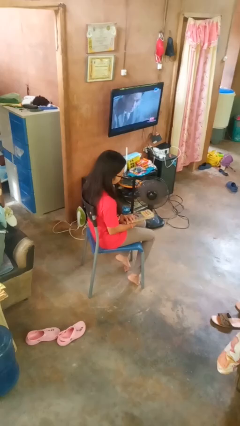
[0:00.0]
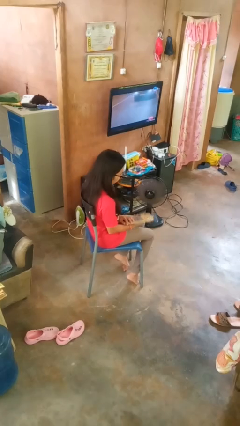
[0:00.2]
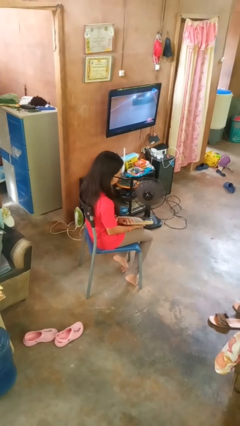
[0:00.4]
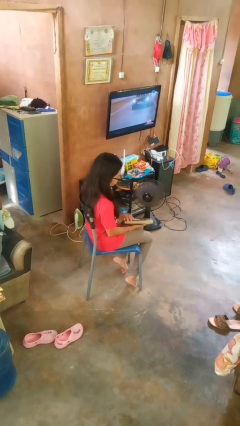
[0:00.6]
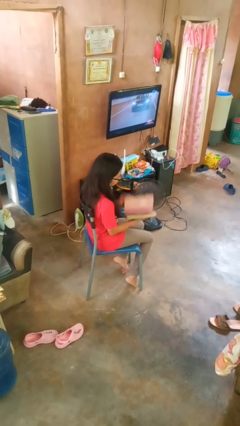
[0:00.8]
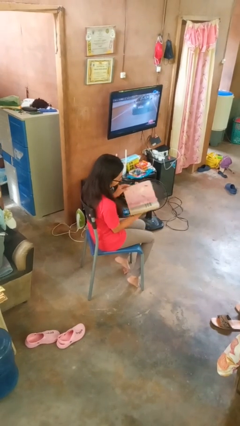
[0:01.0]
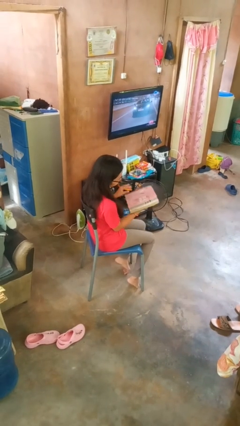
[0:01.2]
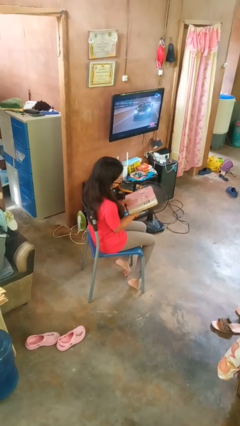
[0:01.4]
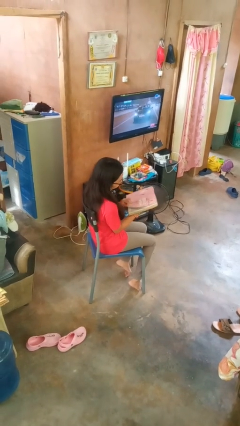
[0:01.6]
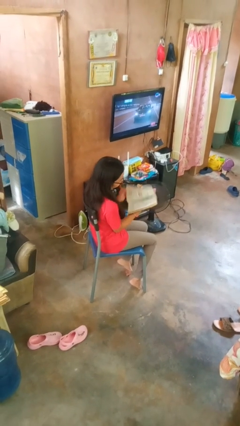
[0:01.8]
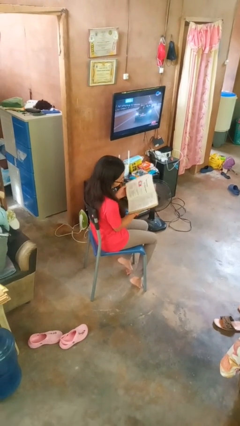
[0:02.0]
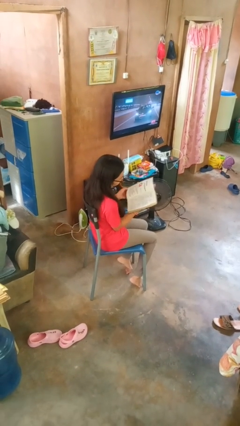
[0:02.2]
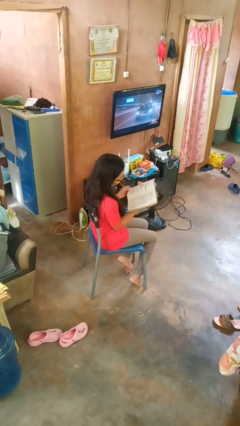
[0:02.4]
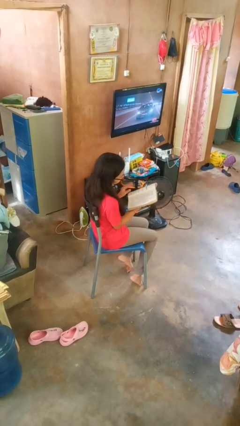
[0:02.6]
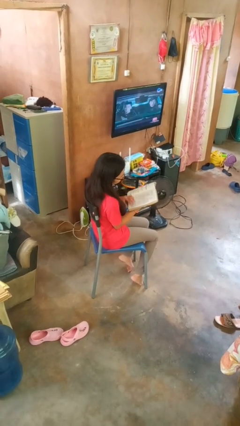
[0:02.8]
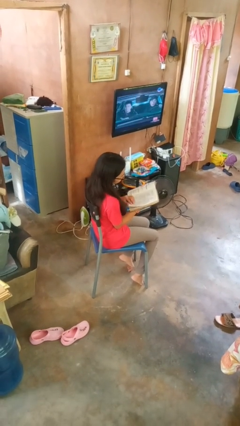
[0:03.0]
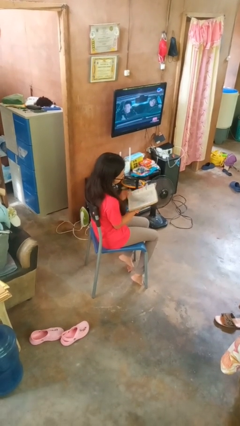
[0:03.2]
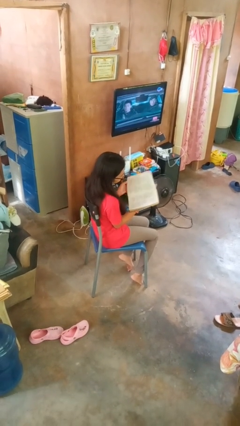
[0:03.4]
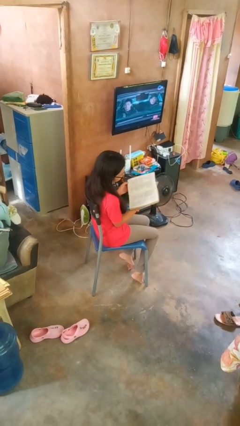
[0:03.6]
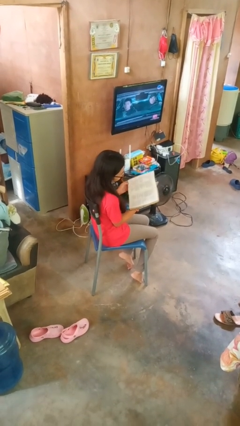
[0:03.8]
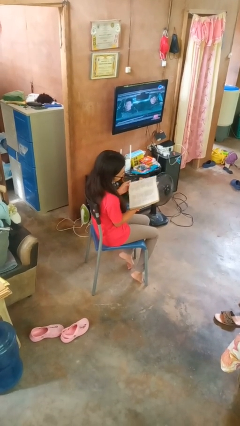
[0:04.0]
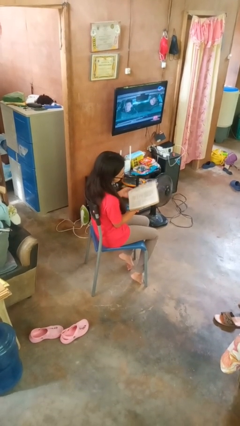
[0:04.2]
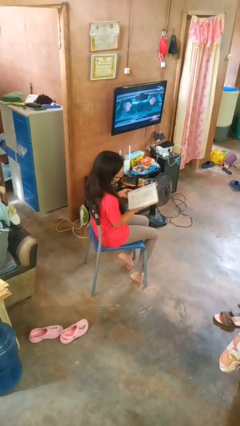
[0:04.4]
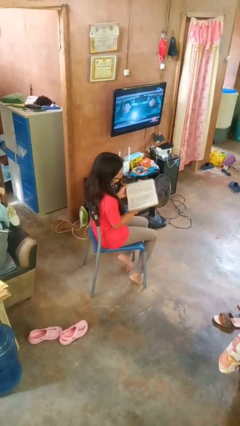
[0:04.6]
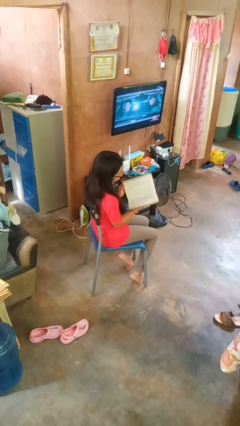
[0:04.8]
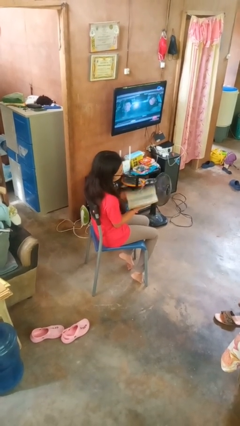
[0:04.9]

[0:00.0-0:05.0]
person reads book

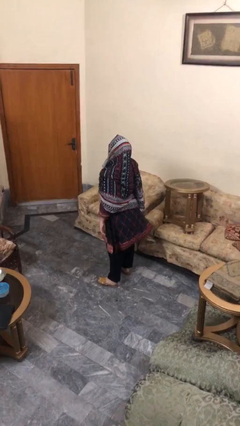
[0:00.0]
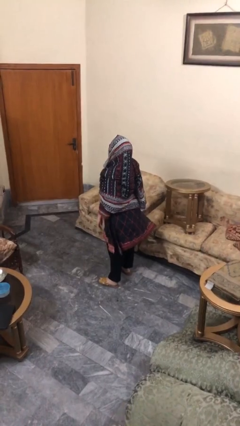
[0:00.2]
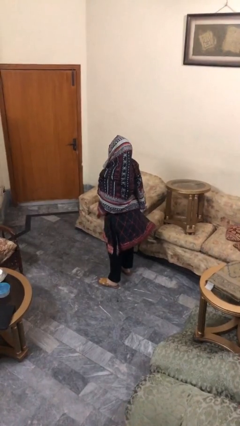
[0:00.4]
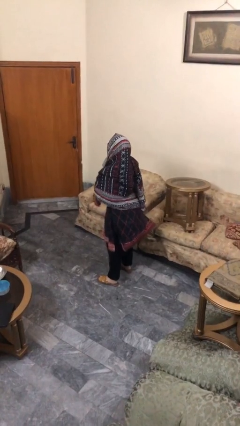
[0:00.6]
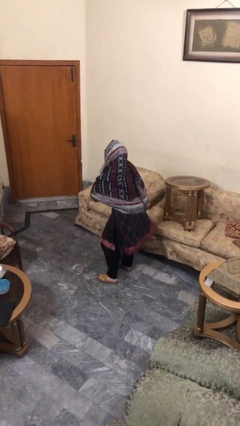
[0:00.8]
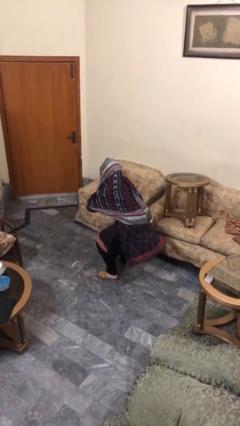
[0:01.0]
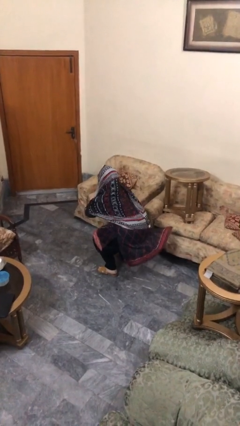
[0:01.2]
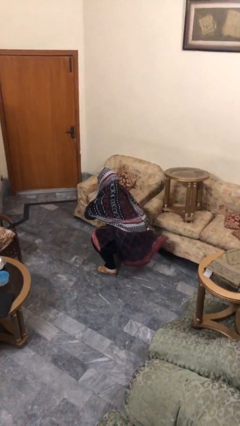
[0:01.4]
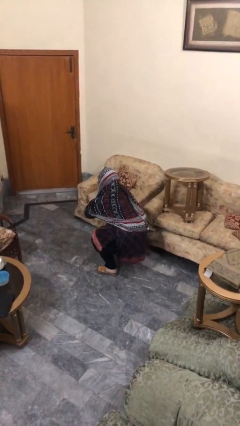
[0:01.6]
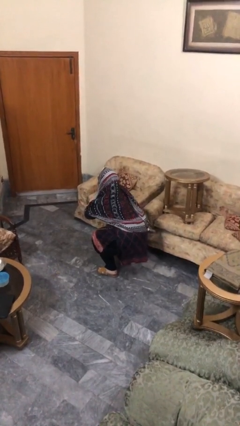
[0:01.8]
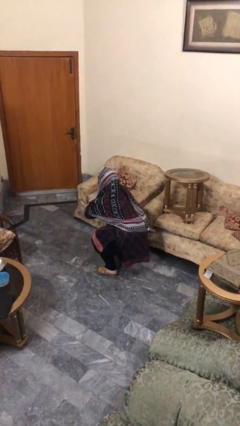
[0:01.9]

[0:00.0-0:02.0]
person squats

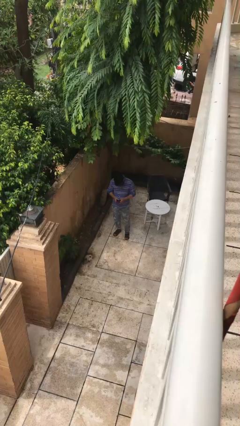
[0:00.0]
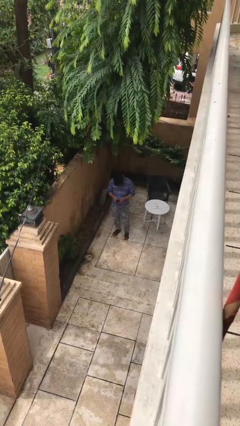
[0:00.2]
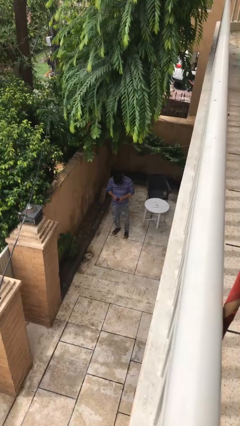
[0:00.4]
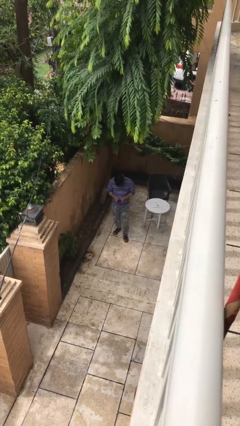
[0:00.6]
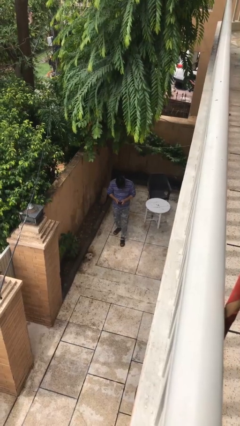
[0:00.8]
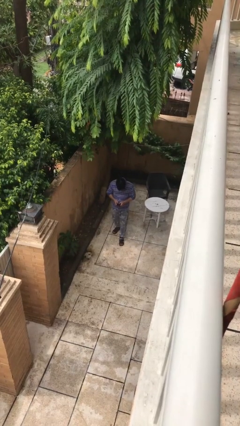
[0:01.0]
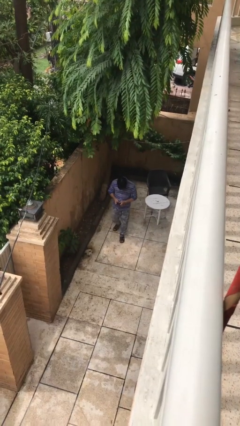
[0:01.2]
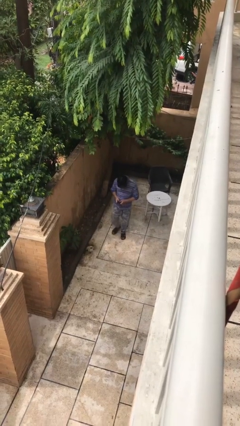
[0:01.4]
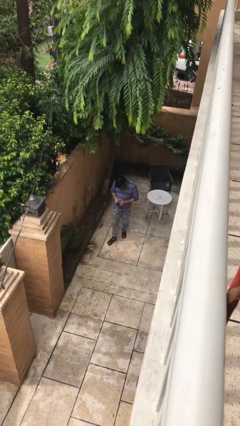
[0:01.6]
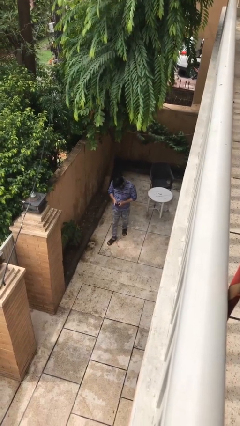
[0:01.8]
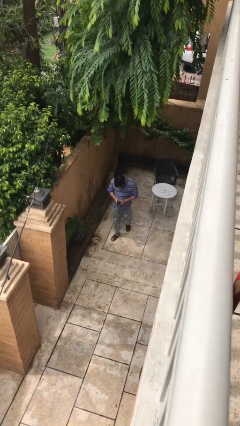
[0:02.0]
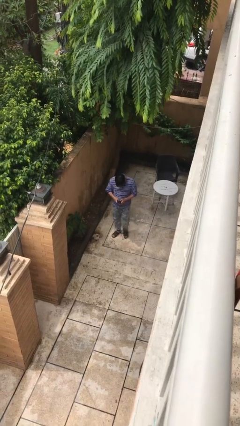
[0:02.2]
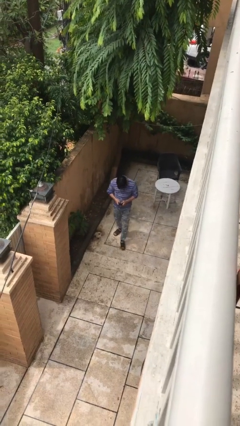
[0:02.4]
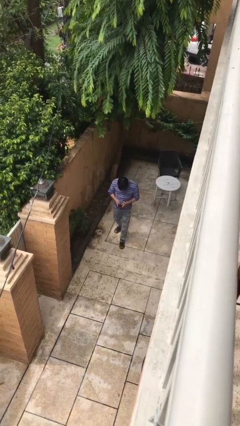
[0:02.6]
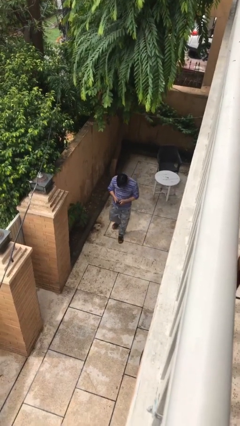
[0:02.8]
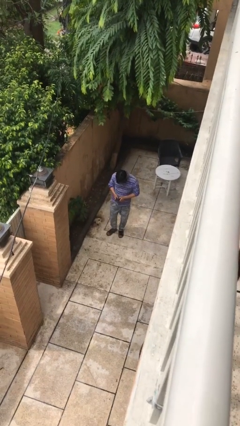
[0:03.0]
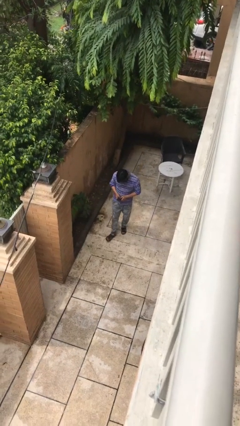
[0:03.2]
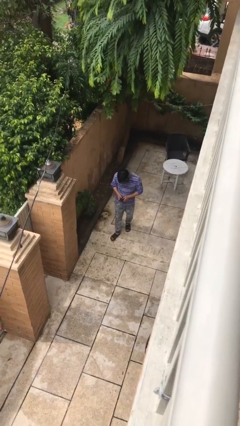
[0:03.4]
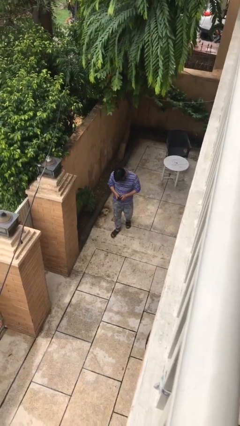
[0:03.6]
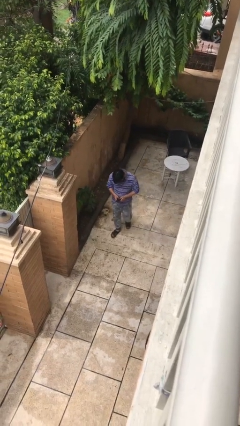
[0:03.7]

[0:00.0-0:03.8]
person texts on phone

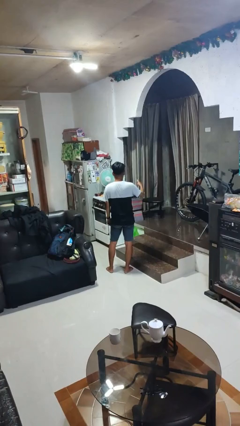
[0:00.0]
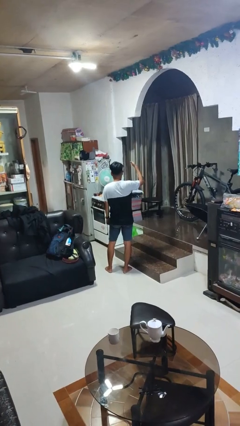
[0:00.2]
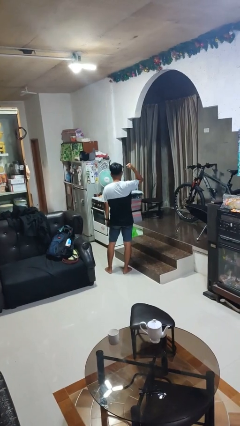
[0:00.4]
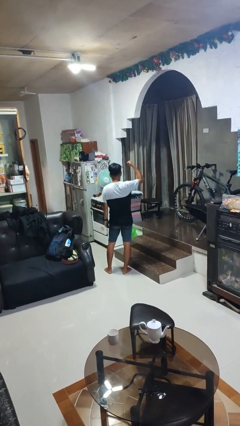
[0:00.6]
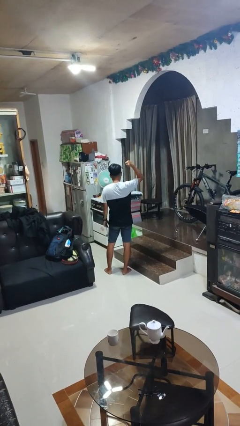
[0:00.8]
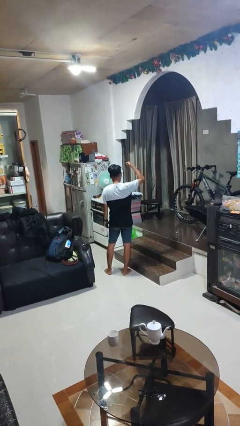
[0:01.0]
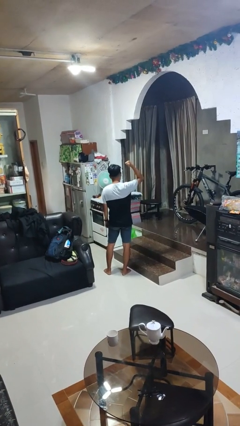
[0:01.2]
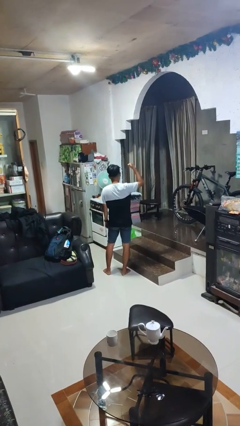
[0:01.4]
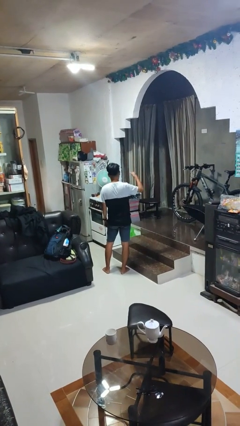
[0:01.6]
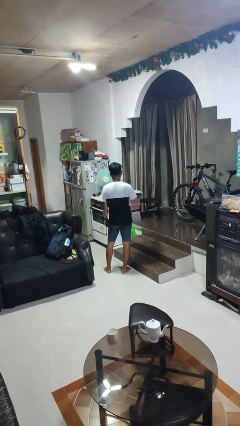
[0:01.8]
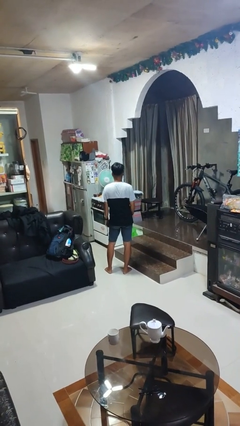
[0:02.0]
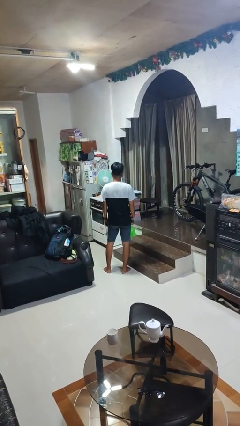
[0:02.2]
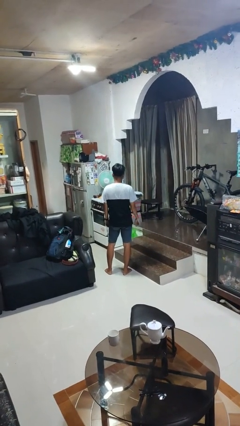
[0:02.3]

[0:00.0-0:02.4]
person gestures behind me

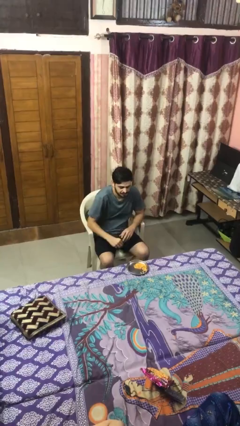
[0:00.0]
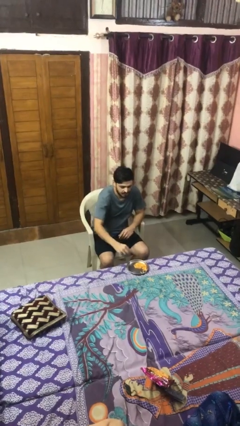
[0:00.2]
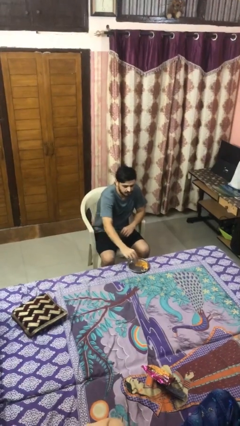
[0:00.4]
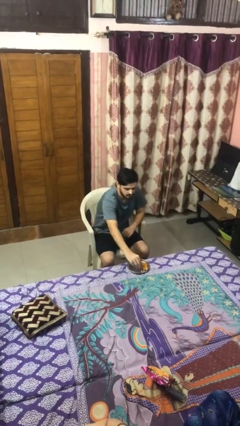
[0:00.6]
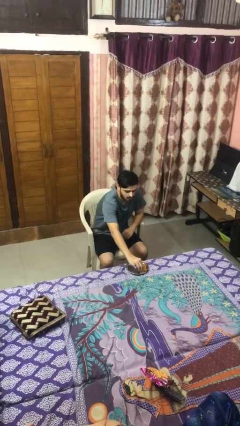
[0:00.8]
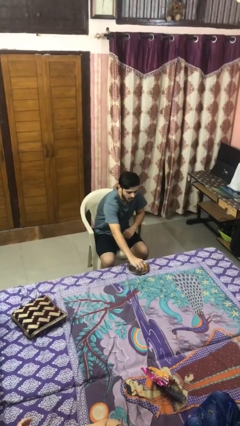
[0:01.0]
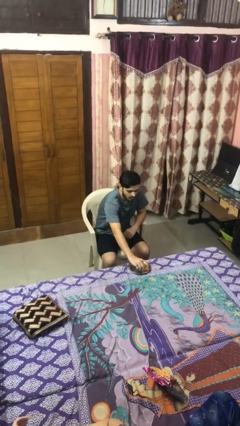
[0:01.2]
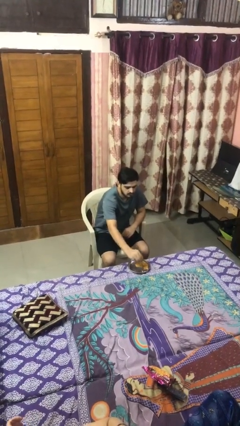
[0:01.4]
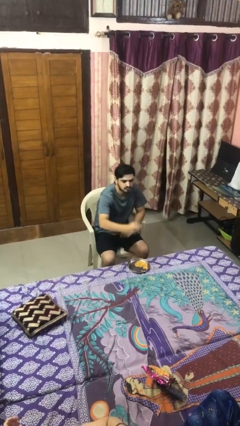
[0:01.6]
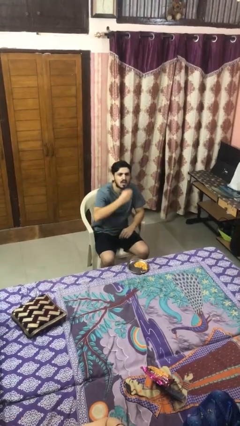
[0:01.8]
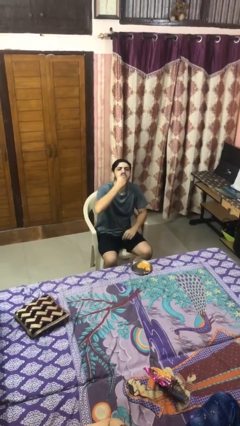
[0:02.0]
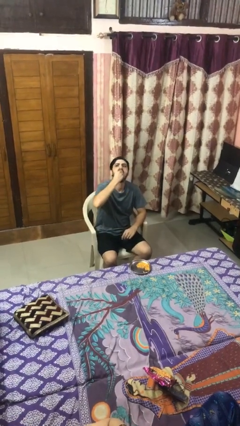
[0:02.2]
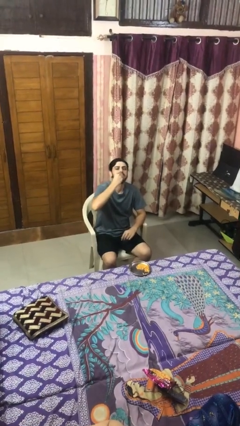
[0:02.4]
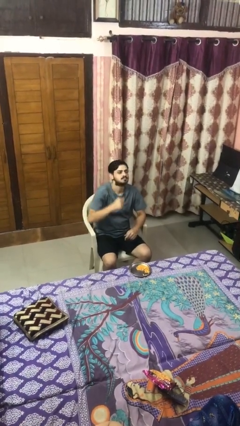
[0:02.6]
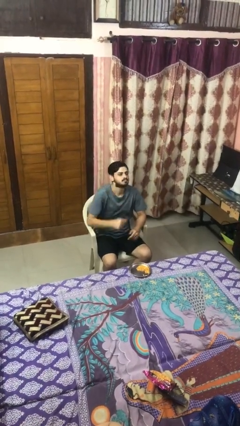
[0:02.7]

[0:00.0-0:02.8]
person eats with hands

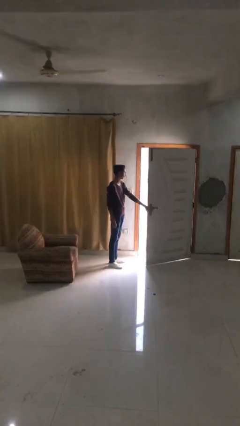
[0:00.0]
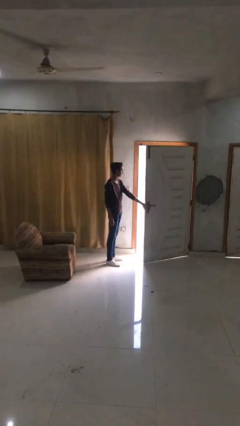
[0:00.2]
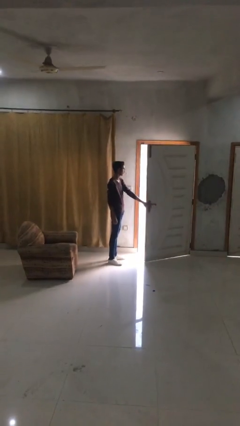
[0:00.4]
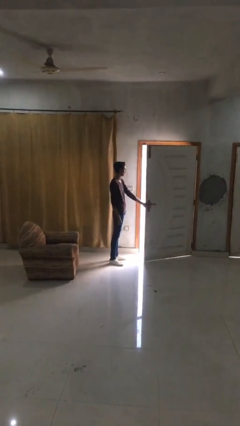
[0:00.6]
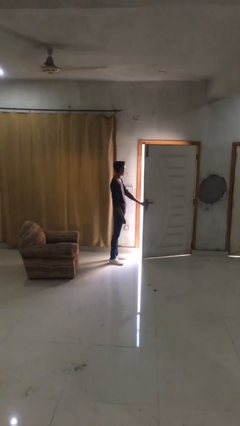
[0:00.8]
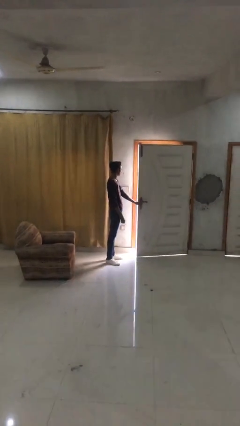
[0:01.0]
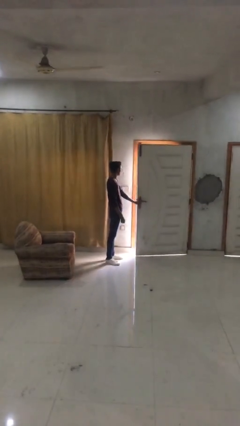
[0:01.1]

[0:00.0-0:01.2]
person closes facility door
